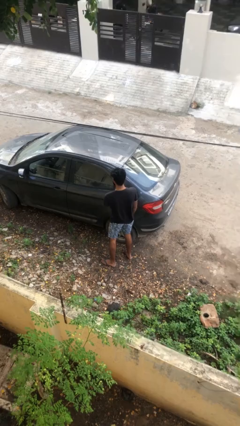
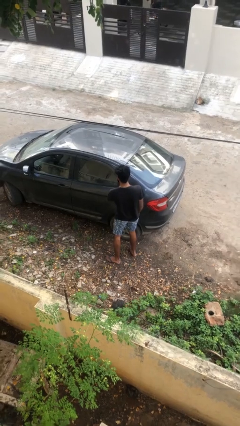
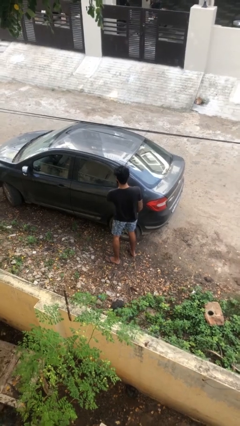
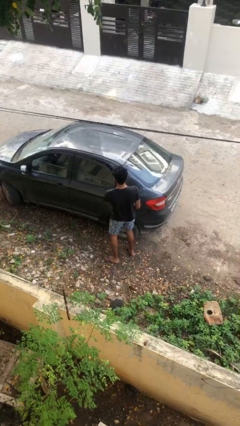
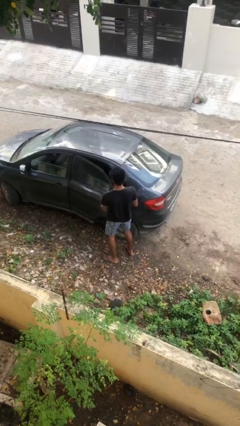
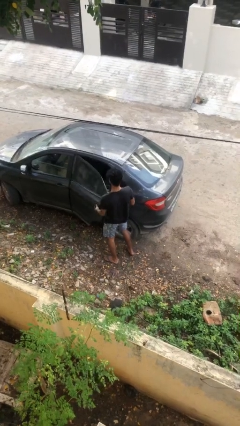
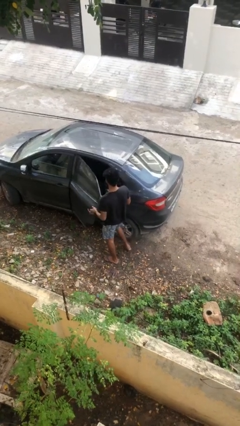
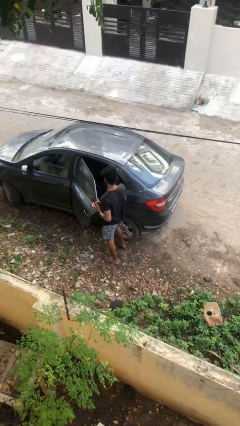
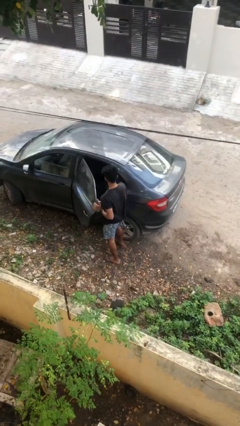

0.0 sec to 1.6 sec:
person opens car door

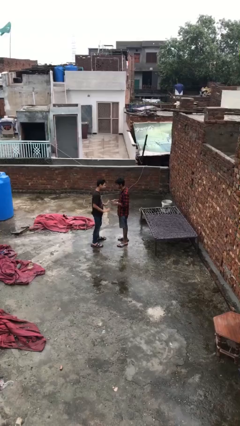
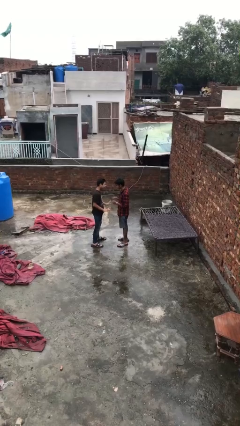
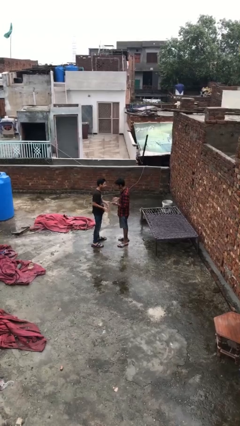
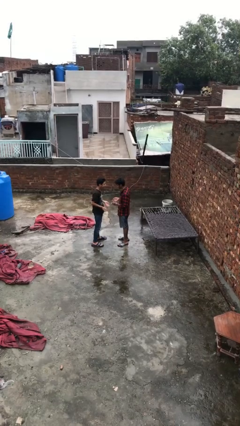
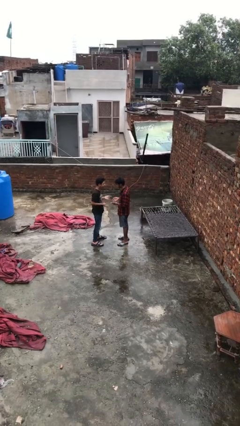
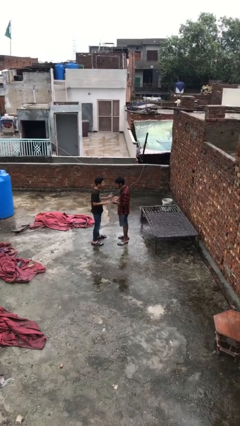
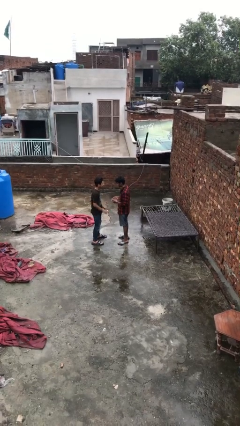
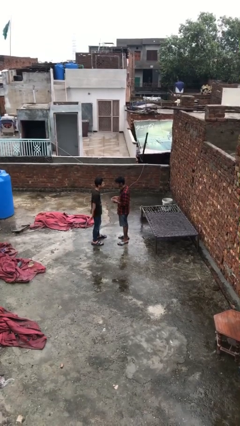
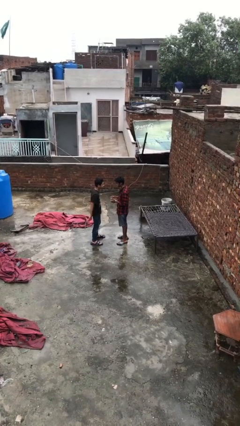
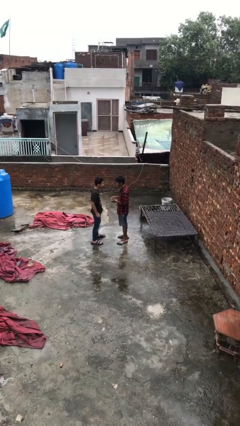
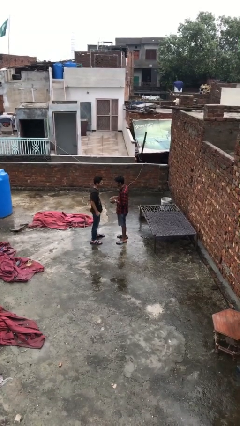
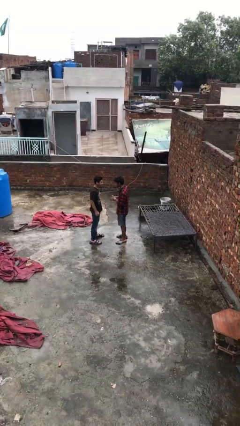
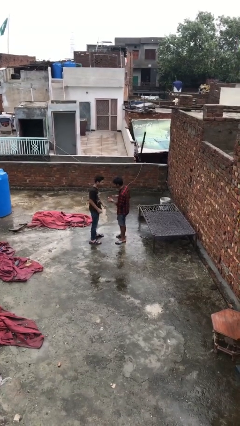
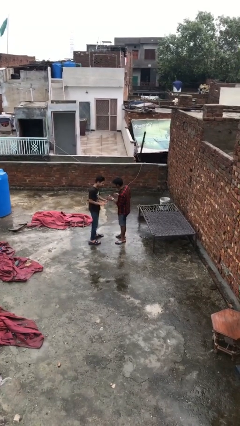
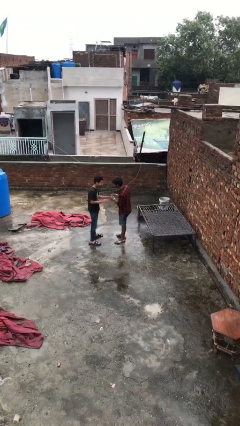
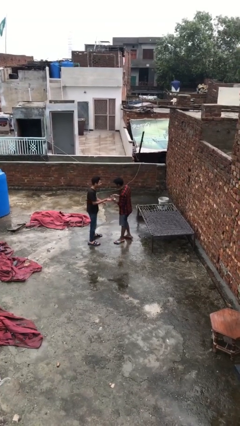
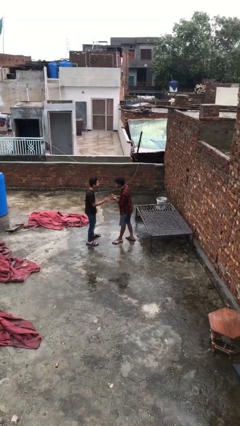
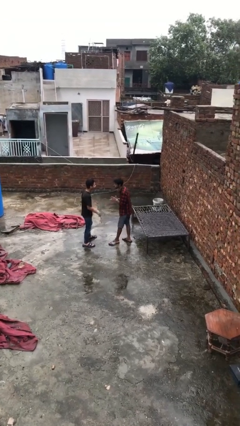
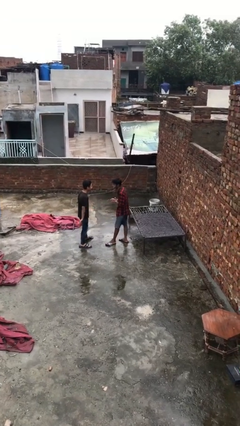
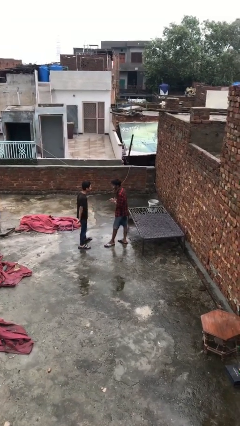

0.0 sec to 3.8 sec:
person talks to person

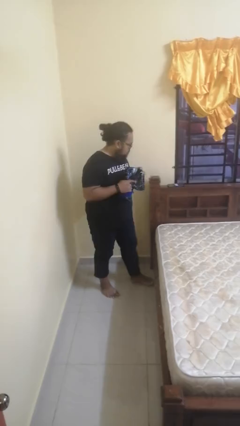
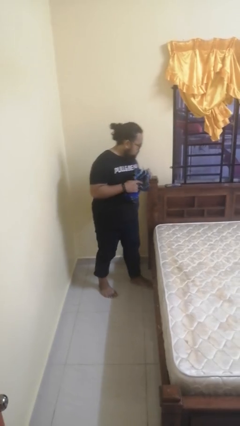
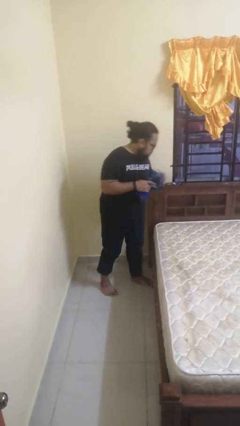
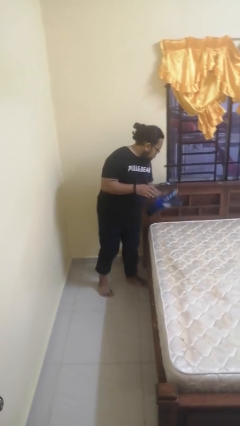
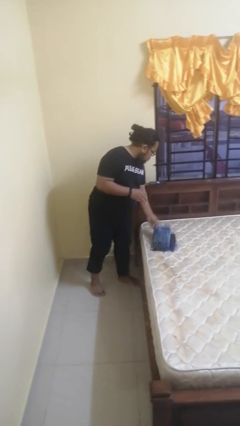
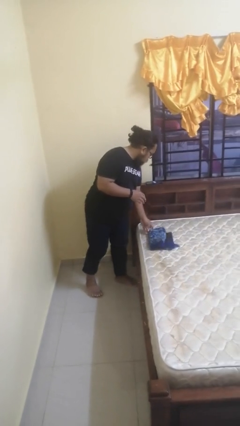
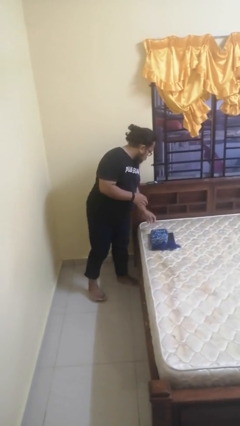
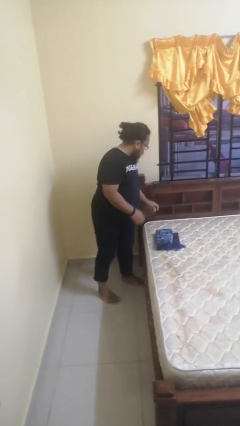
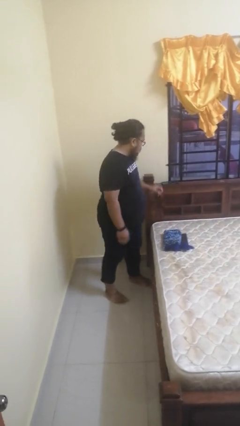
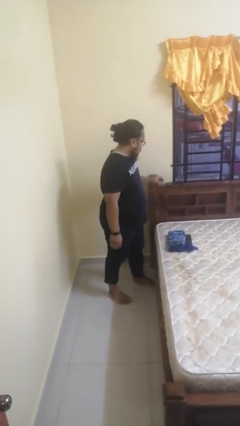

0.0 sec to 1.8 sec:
person puts down object on bed

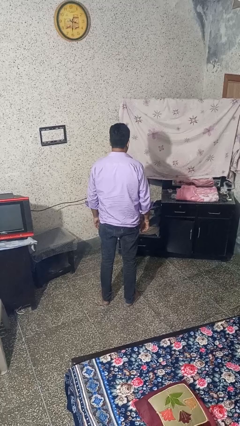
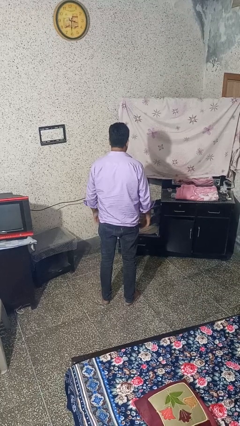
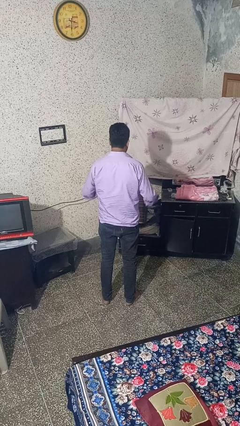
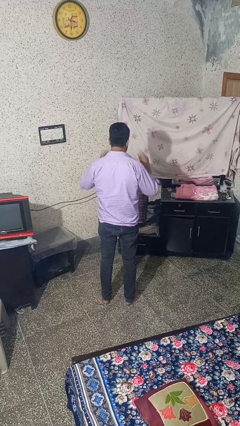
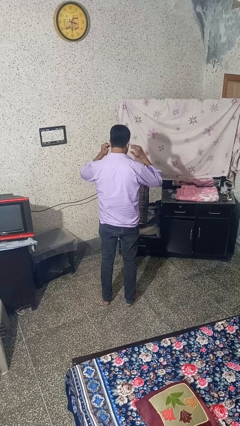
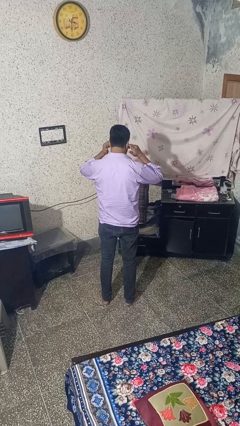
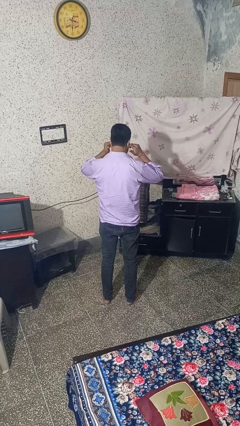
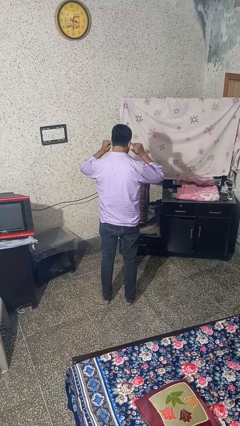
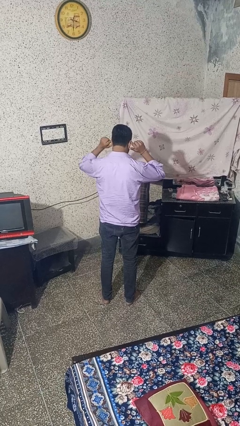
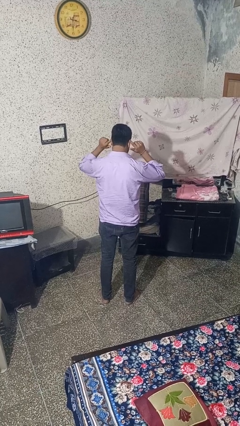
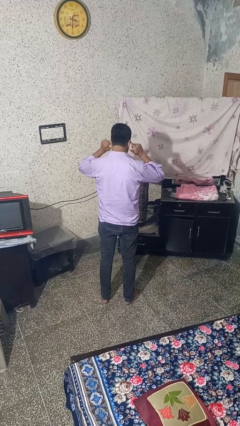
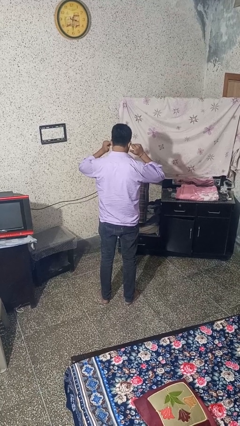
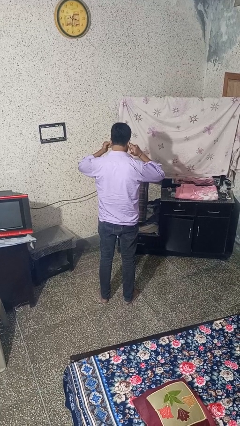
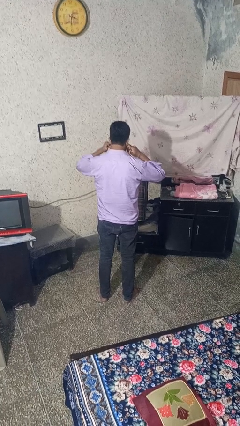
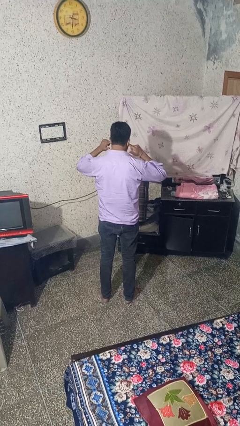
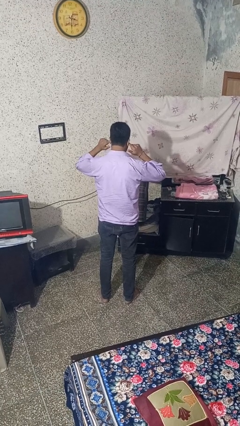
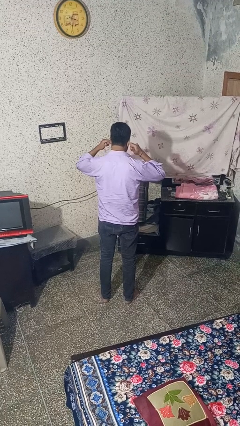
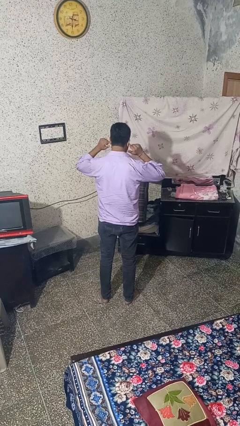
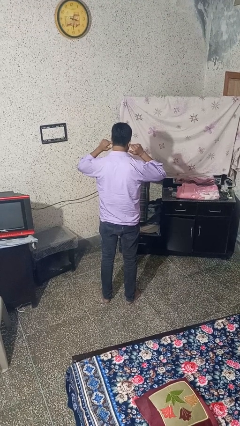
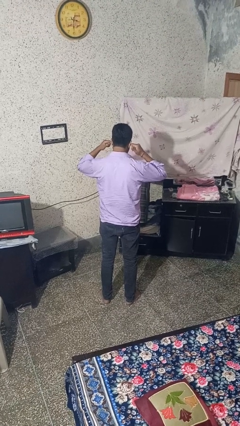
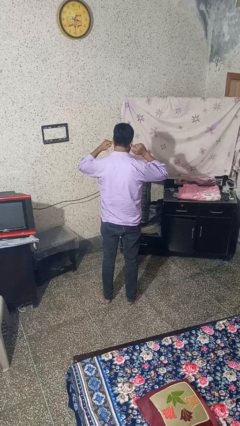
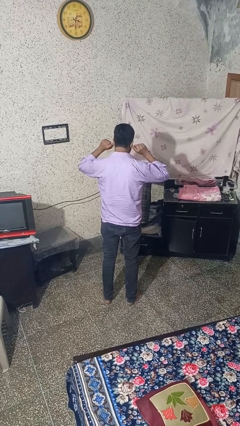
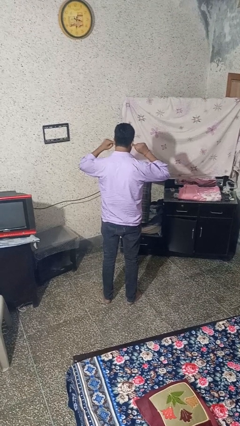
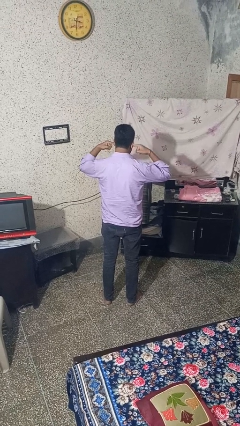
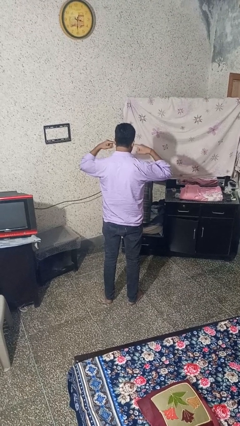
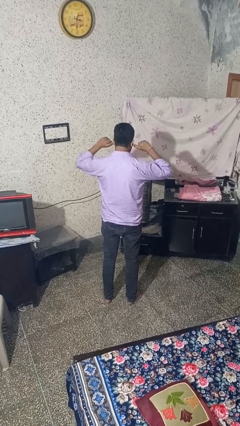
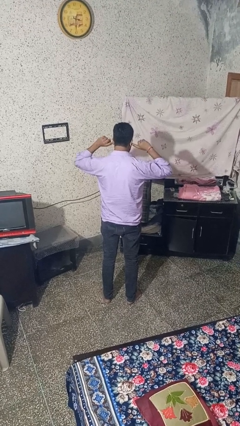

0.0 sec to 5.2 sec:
person puts fingers in ear

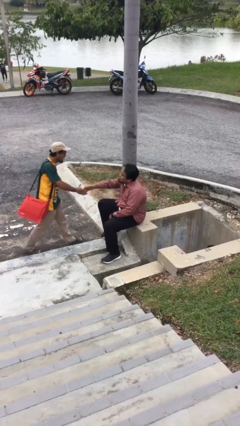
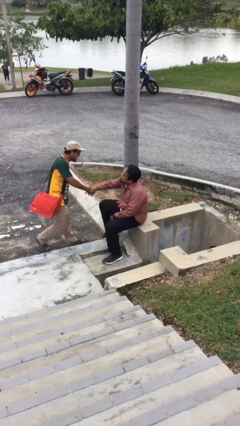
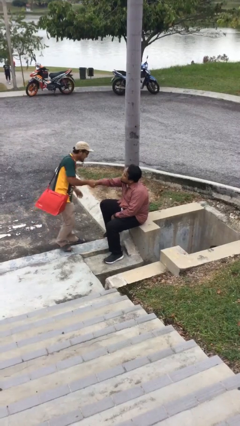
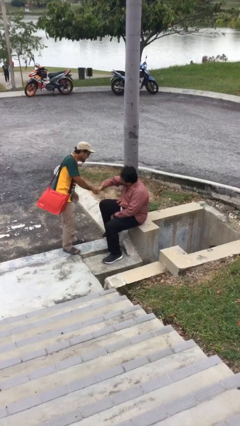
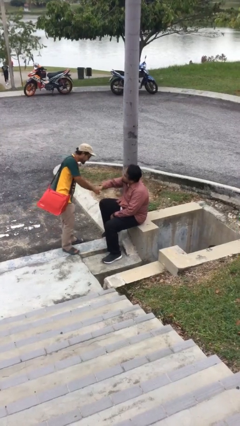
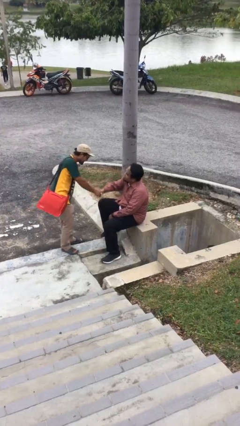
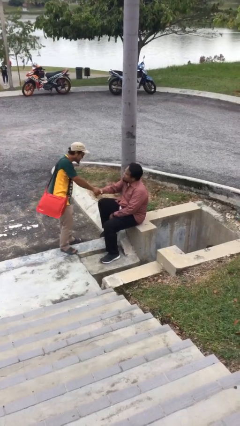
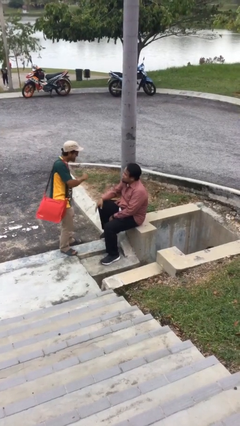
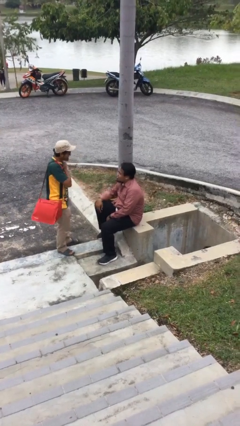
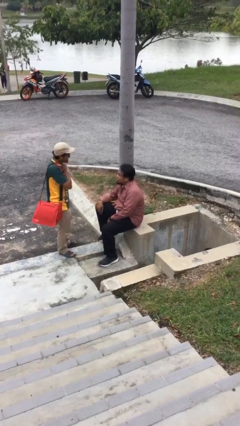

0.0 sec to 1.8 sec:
person shakes hand

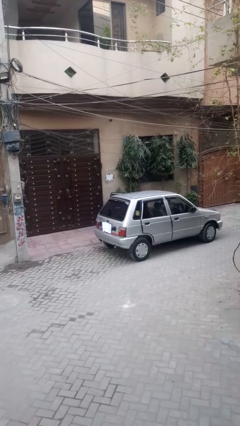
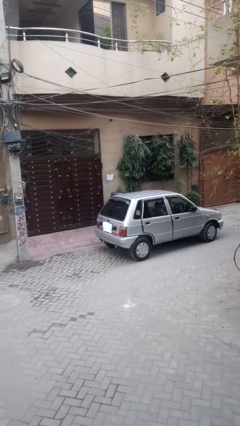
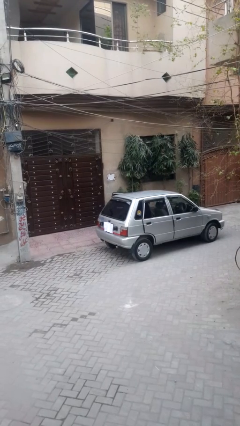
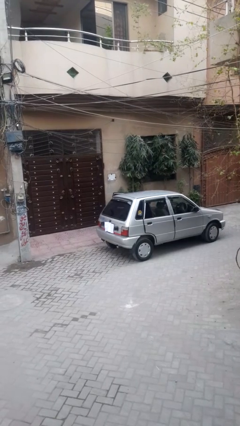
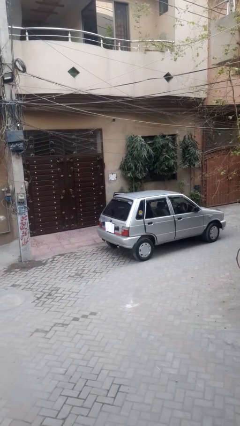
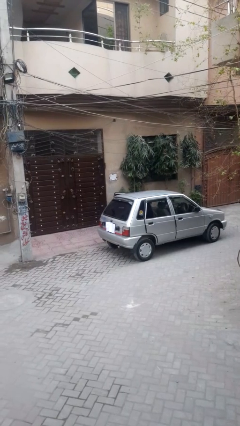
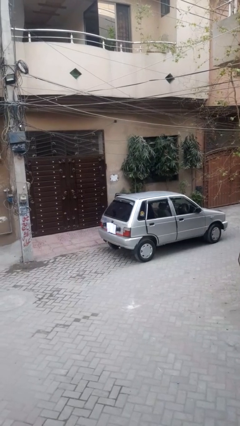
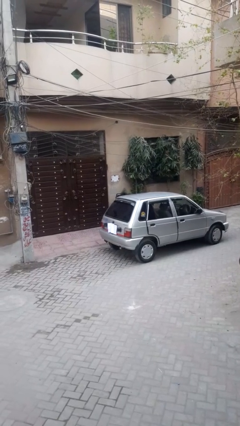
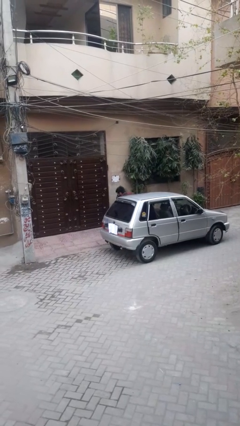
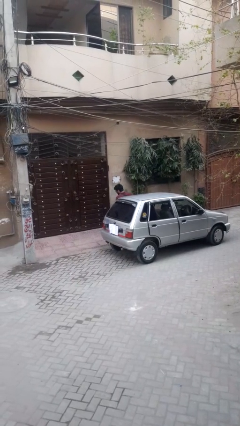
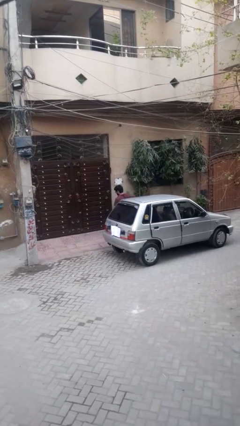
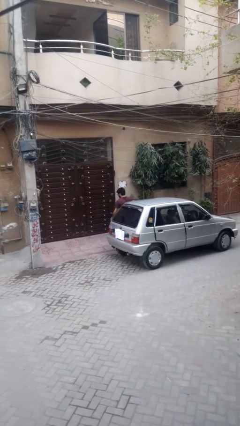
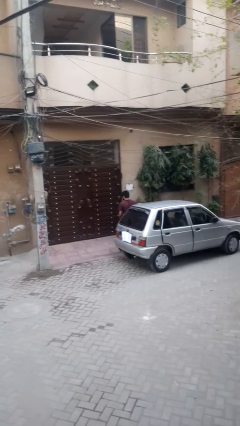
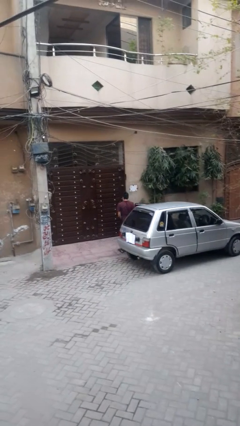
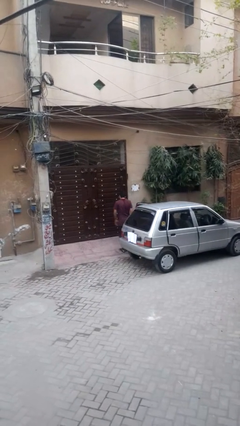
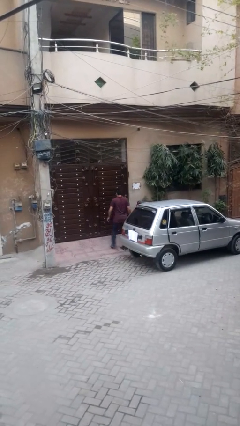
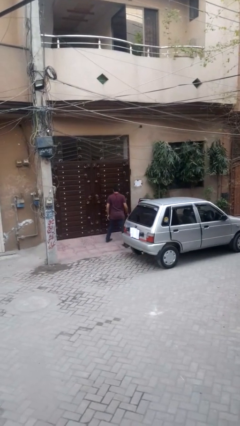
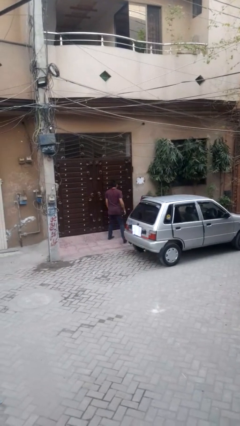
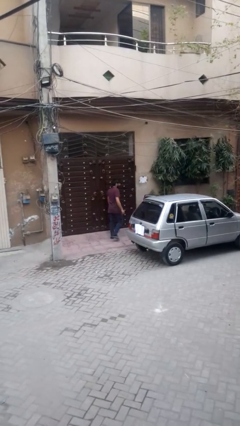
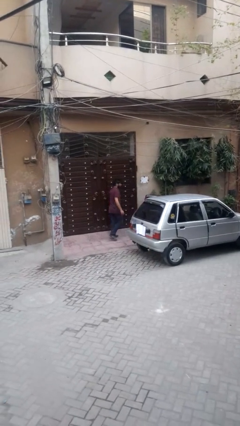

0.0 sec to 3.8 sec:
person exits car
